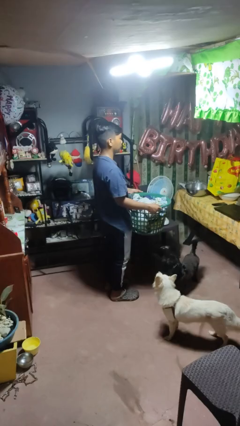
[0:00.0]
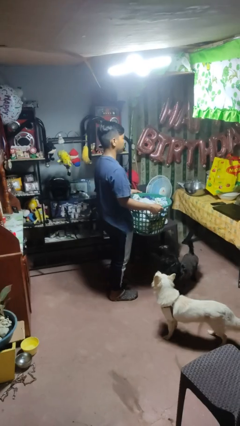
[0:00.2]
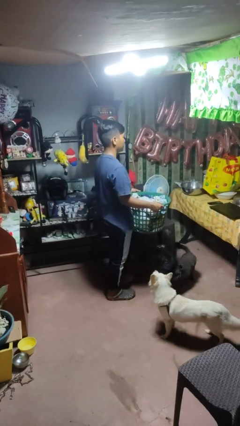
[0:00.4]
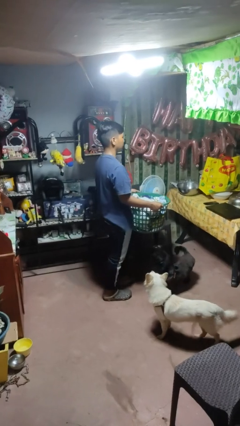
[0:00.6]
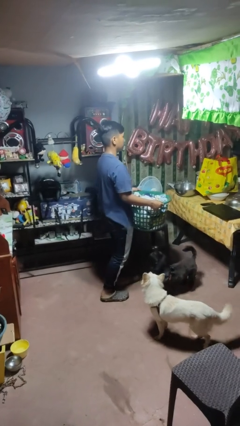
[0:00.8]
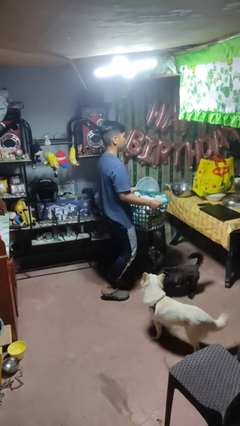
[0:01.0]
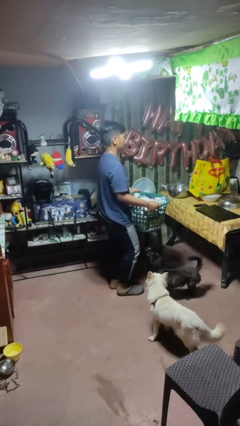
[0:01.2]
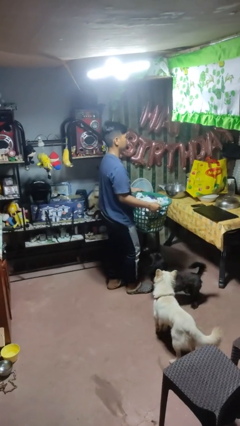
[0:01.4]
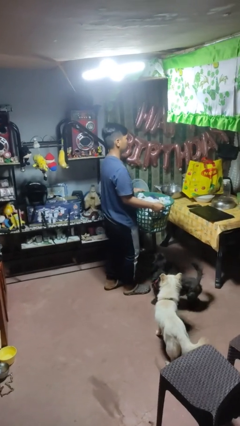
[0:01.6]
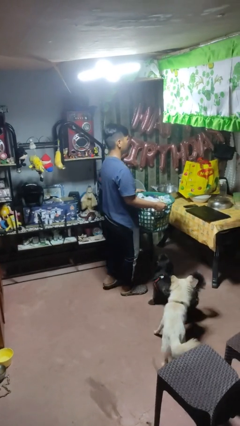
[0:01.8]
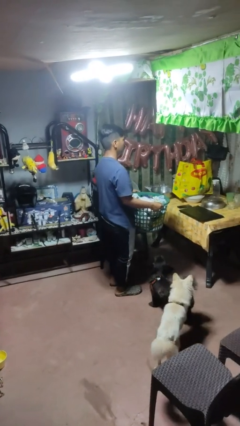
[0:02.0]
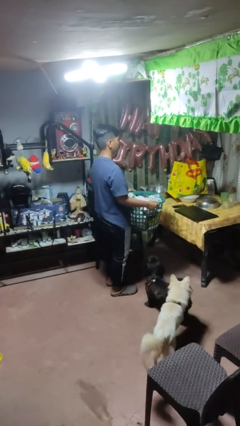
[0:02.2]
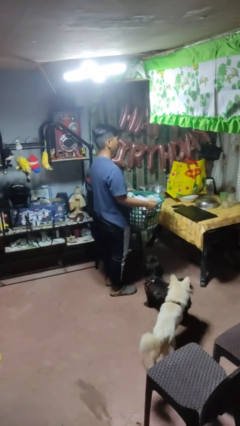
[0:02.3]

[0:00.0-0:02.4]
person carries laundry basket

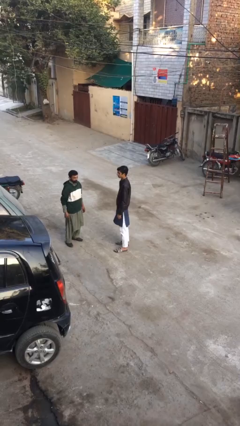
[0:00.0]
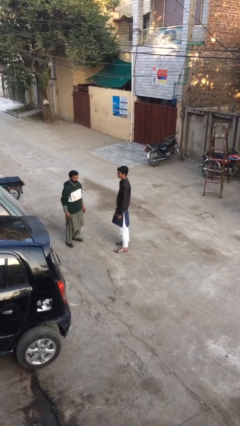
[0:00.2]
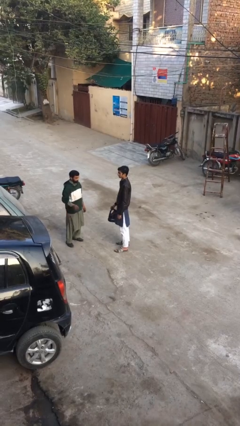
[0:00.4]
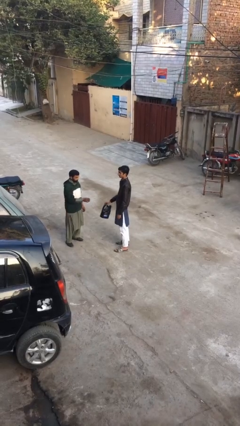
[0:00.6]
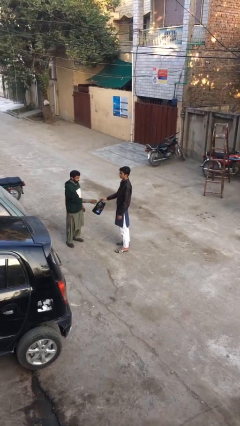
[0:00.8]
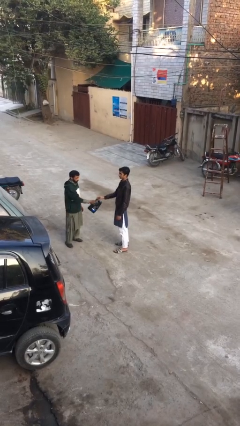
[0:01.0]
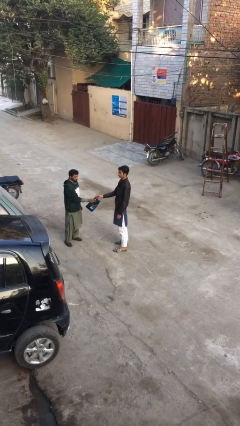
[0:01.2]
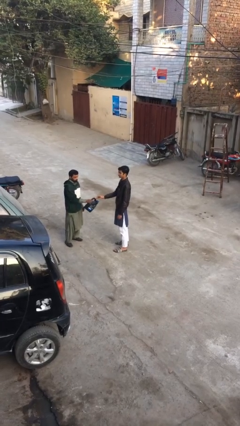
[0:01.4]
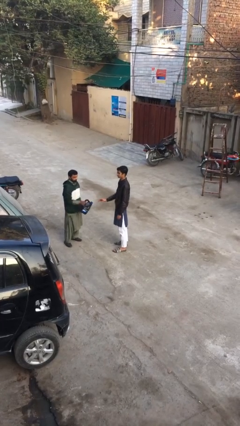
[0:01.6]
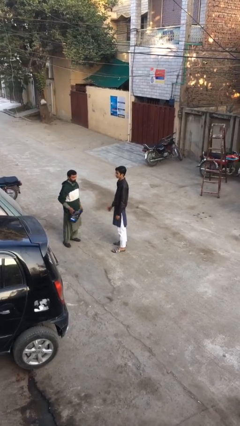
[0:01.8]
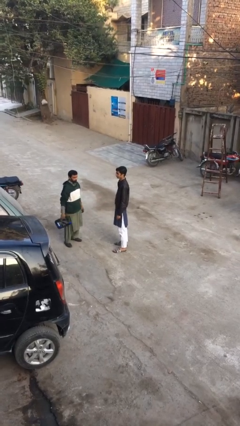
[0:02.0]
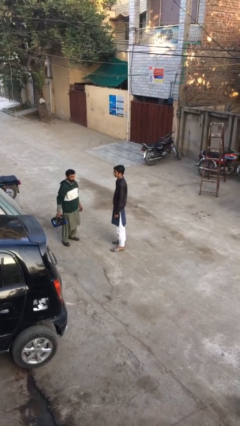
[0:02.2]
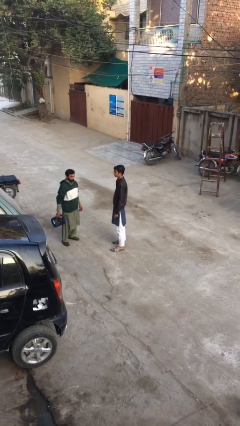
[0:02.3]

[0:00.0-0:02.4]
person transfers object to person

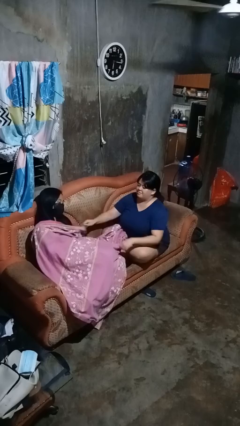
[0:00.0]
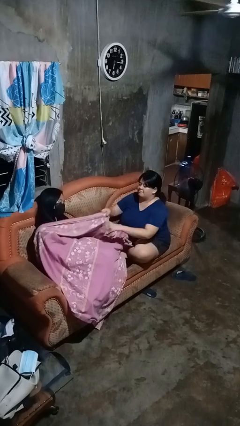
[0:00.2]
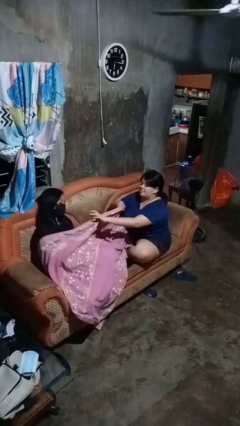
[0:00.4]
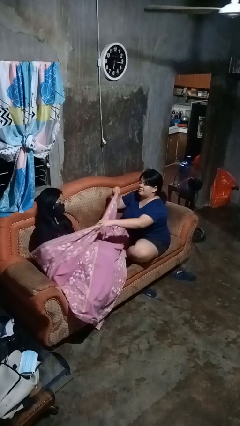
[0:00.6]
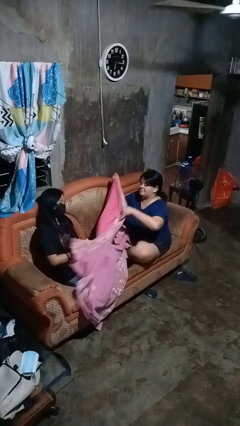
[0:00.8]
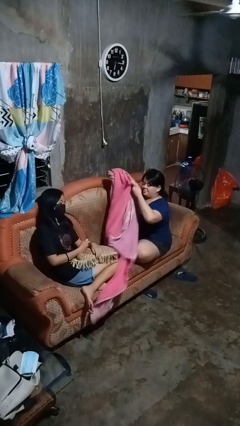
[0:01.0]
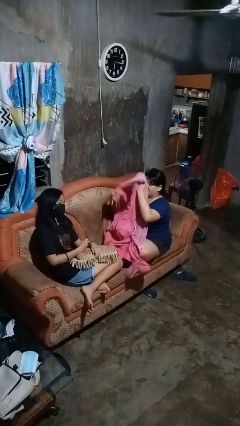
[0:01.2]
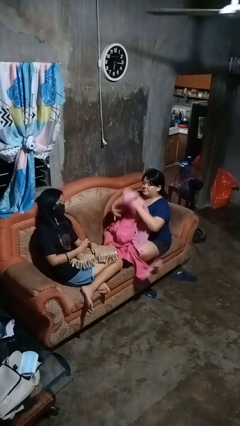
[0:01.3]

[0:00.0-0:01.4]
person uncovers friend with blanket

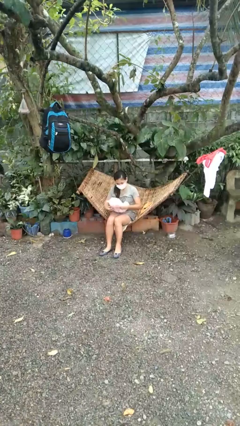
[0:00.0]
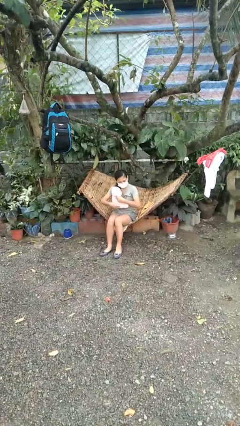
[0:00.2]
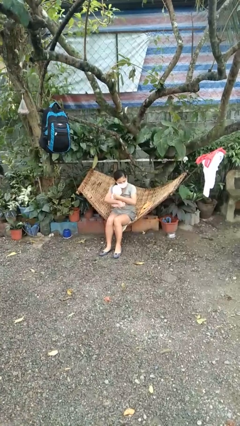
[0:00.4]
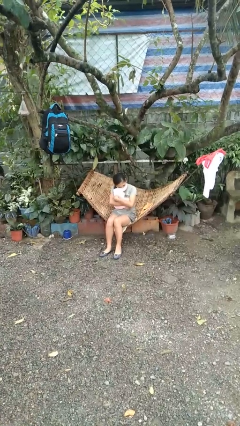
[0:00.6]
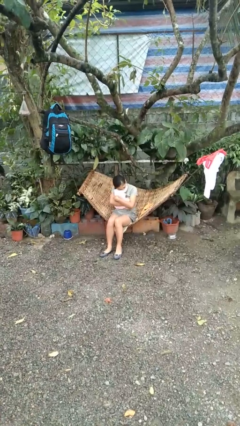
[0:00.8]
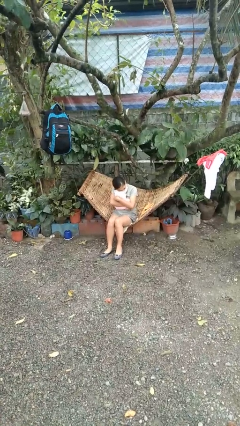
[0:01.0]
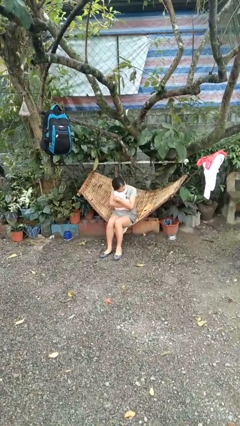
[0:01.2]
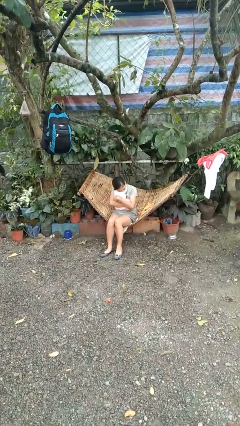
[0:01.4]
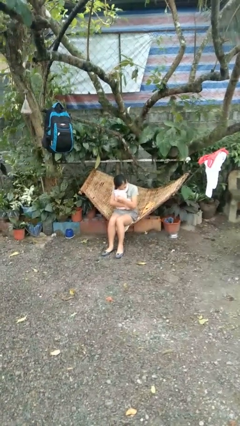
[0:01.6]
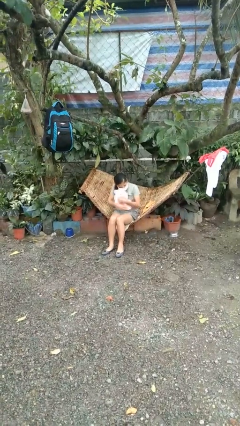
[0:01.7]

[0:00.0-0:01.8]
person hugs stuffed animal

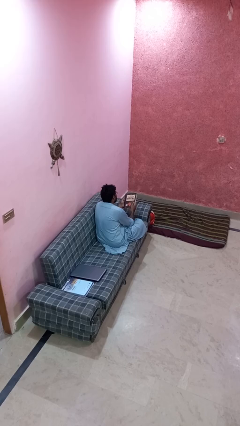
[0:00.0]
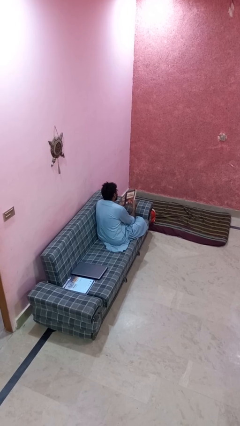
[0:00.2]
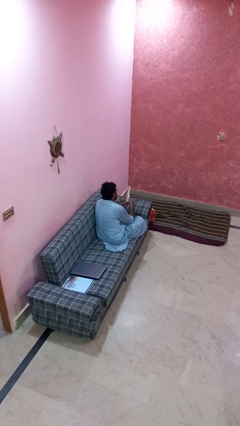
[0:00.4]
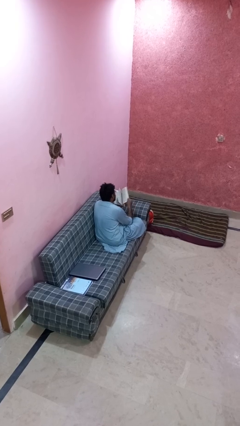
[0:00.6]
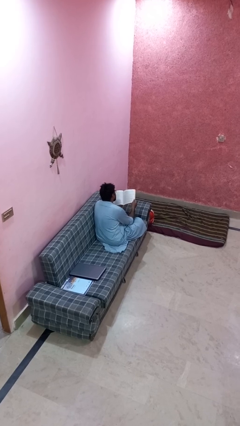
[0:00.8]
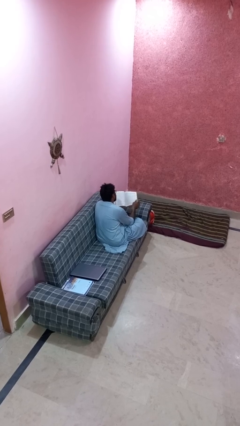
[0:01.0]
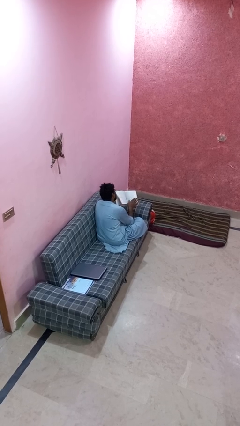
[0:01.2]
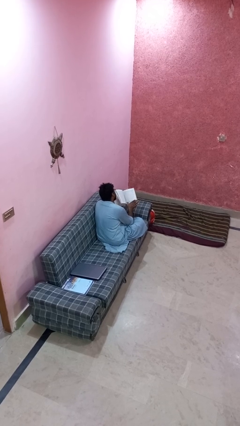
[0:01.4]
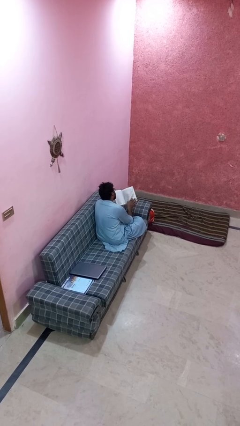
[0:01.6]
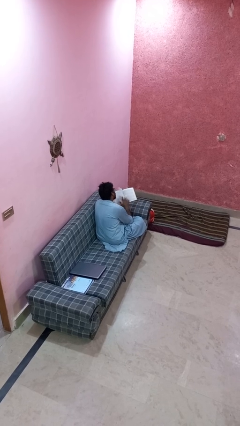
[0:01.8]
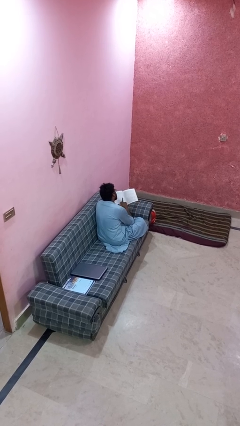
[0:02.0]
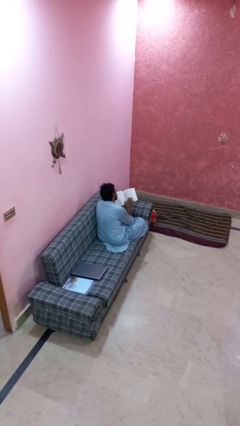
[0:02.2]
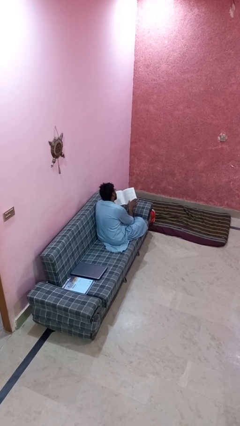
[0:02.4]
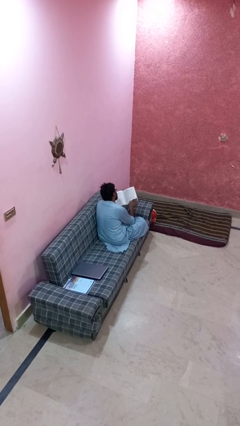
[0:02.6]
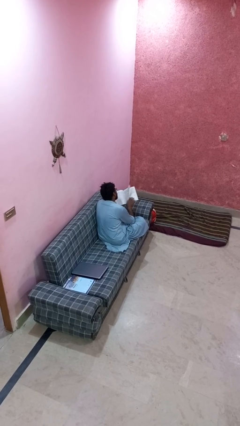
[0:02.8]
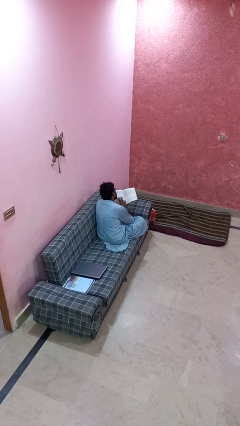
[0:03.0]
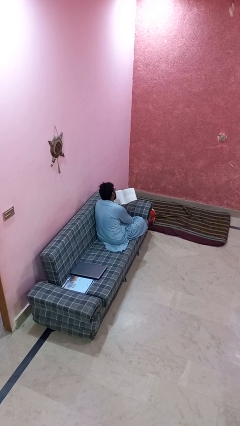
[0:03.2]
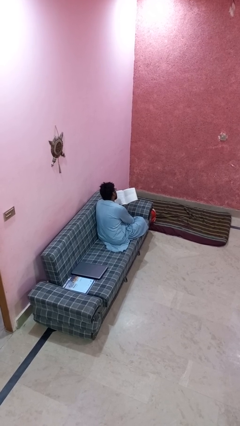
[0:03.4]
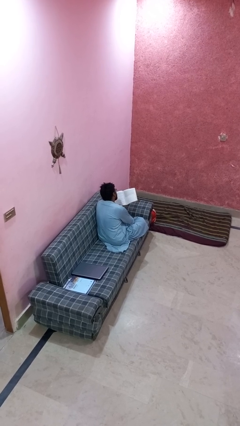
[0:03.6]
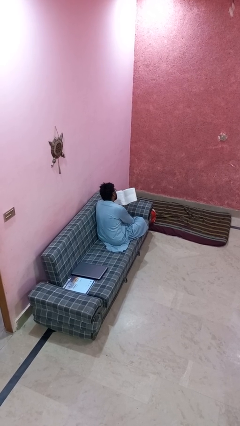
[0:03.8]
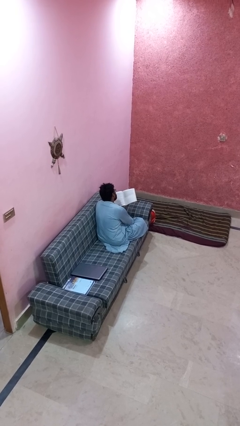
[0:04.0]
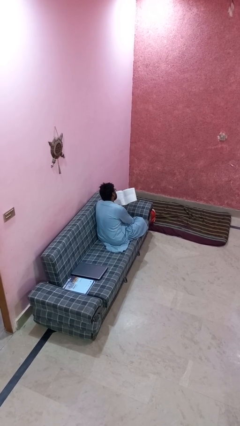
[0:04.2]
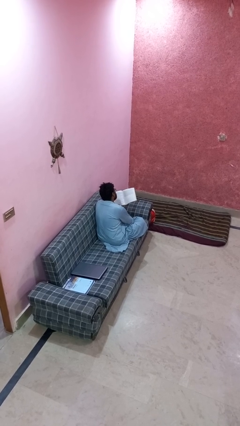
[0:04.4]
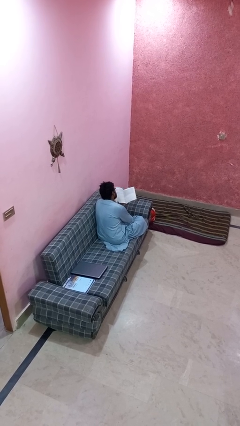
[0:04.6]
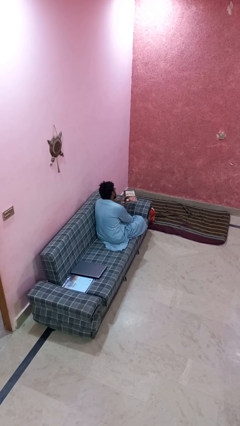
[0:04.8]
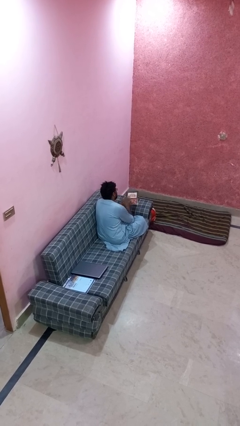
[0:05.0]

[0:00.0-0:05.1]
person reads book

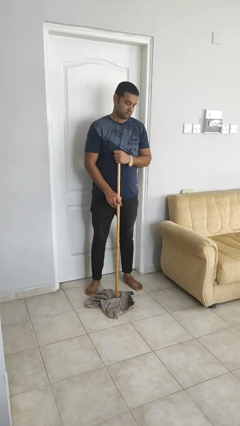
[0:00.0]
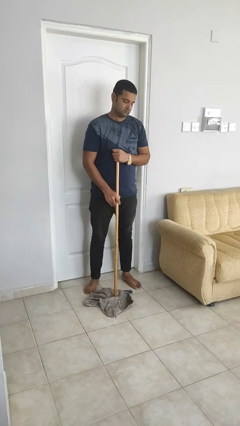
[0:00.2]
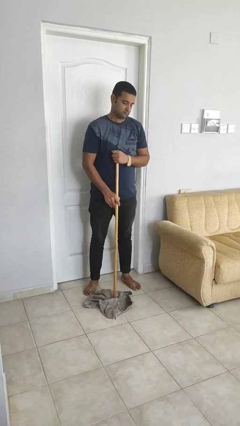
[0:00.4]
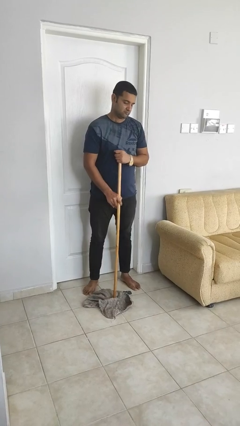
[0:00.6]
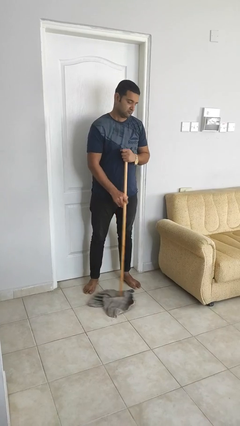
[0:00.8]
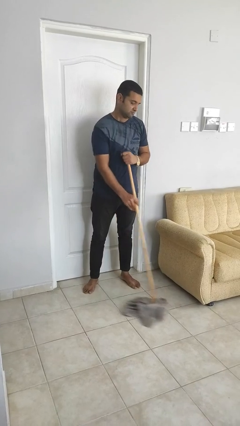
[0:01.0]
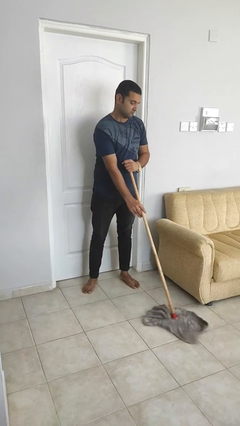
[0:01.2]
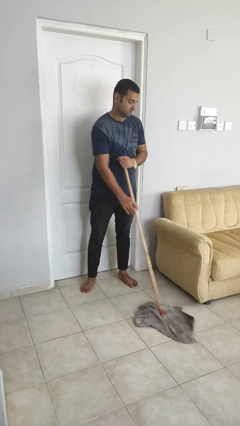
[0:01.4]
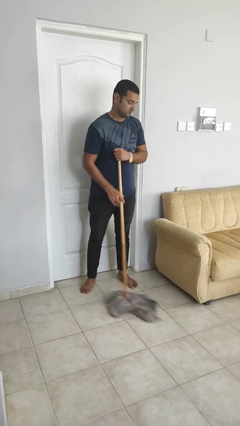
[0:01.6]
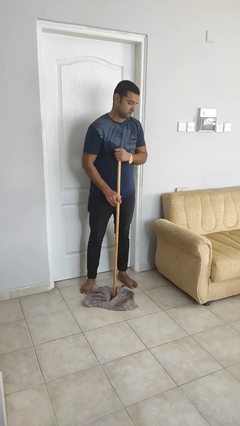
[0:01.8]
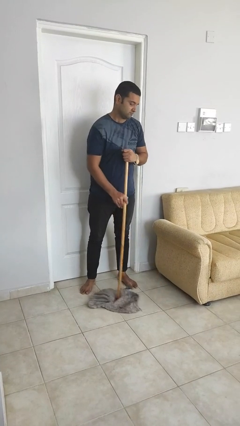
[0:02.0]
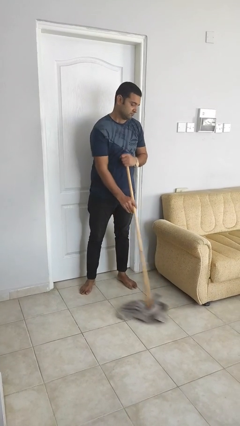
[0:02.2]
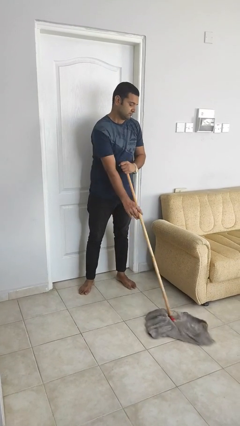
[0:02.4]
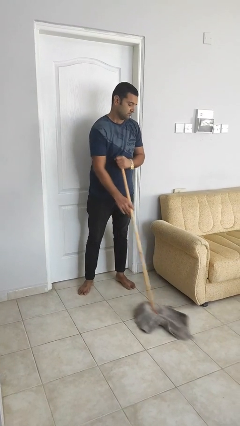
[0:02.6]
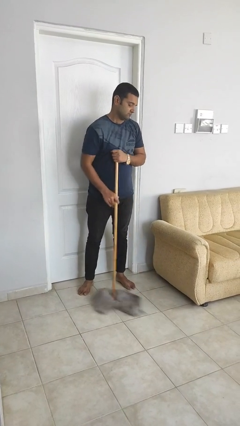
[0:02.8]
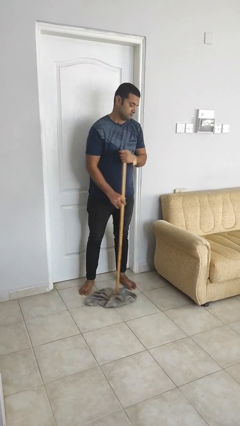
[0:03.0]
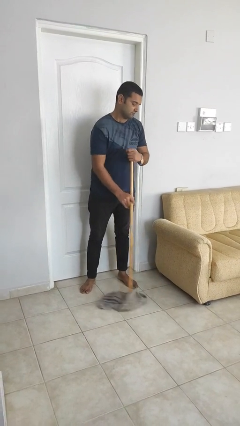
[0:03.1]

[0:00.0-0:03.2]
person mops

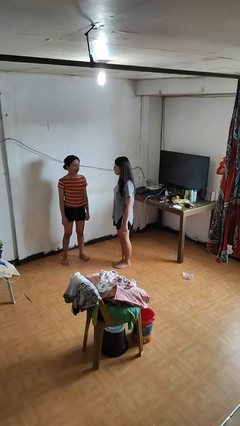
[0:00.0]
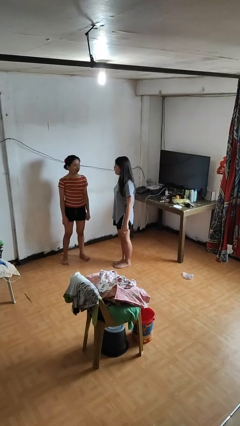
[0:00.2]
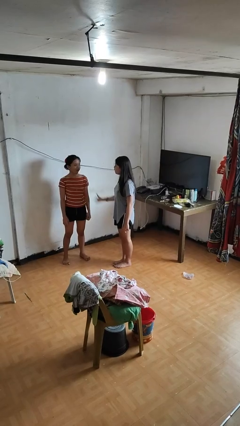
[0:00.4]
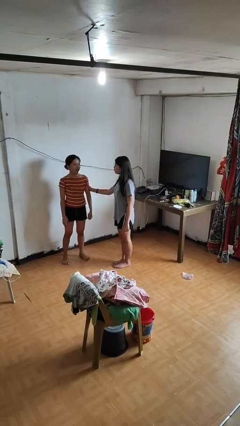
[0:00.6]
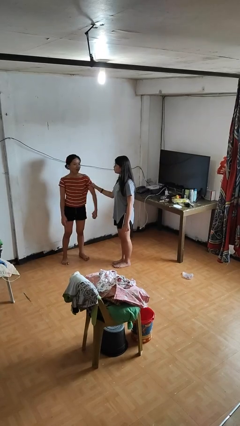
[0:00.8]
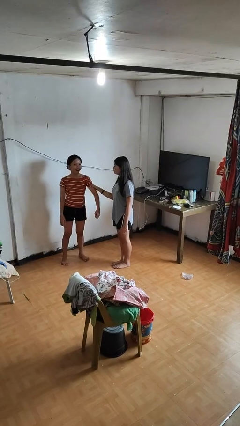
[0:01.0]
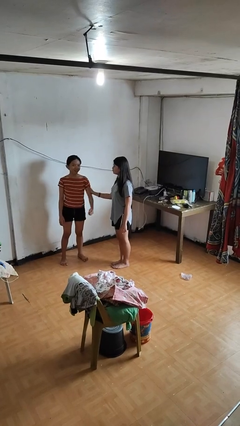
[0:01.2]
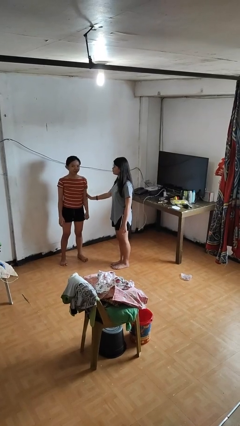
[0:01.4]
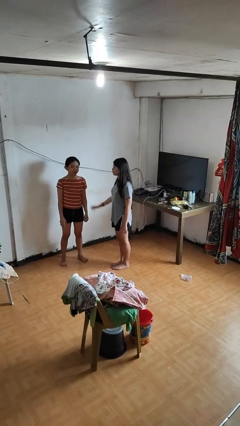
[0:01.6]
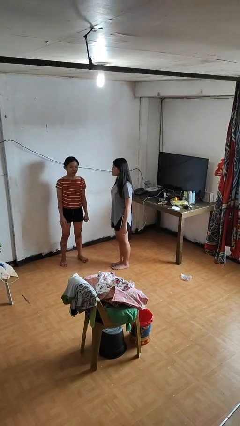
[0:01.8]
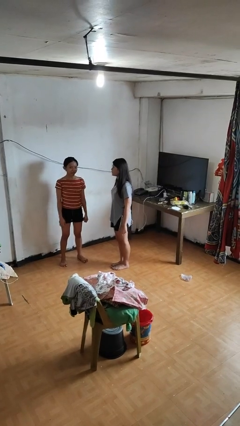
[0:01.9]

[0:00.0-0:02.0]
person grabs person by bicep
